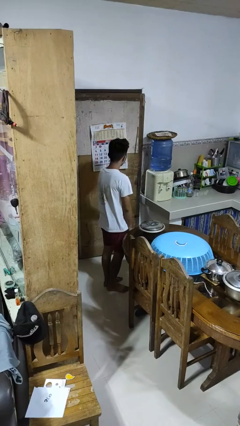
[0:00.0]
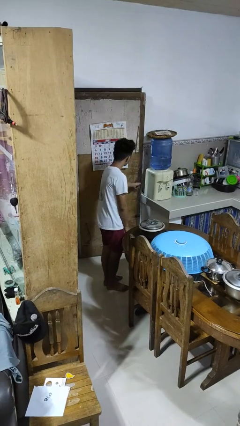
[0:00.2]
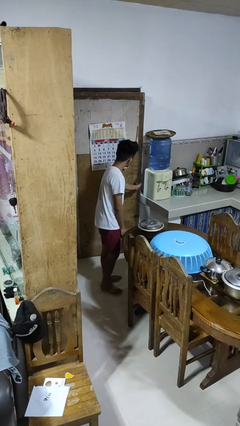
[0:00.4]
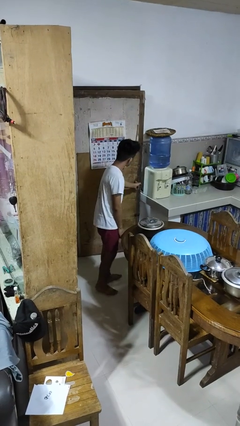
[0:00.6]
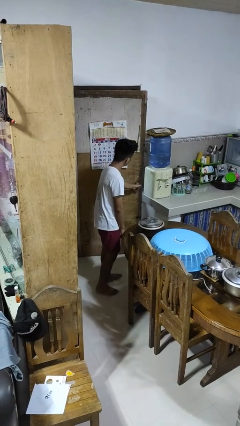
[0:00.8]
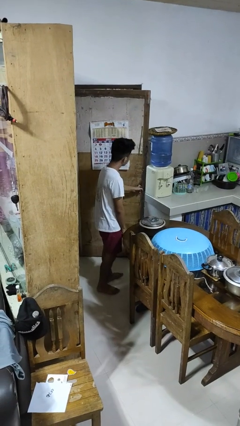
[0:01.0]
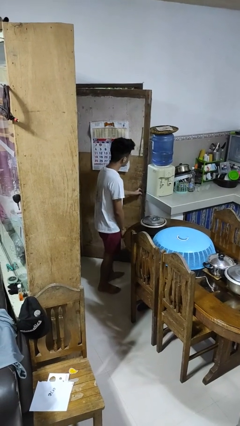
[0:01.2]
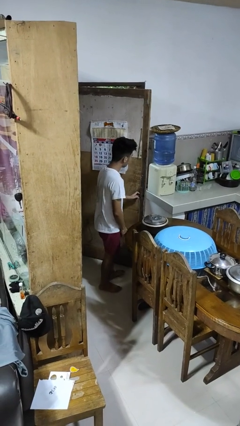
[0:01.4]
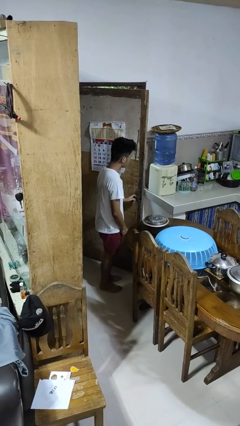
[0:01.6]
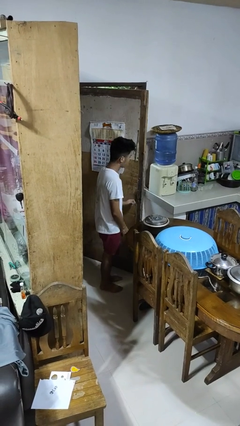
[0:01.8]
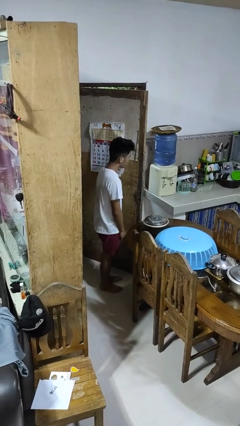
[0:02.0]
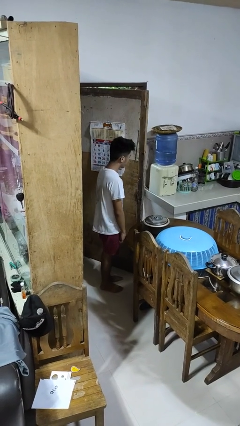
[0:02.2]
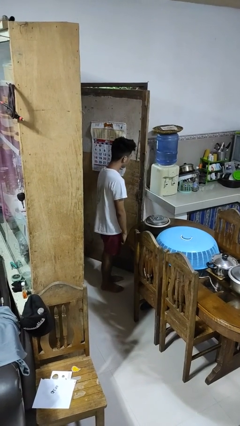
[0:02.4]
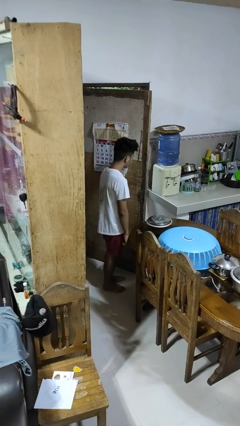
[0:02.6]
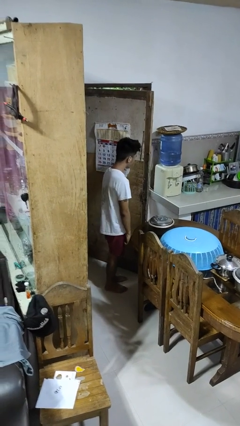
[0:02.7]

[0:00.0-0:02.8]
person opens facility door

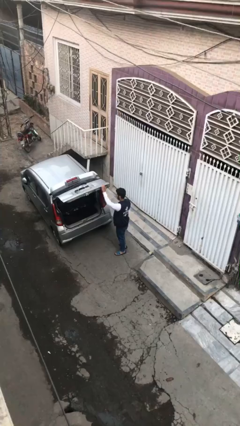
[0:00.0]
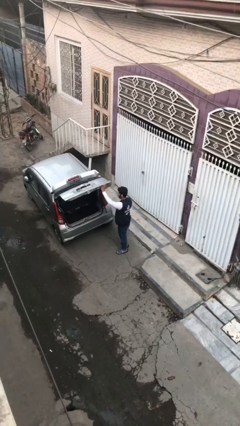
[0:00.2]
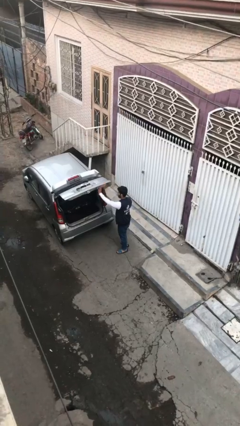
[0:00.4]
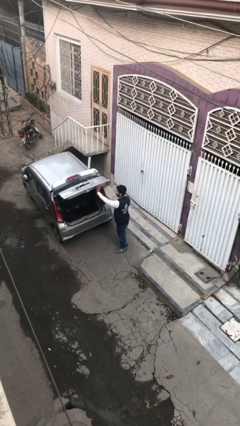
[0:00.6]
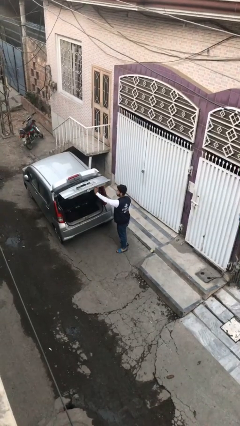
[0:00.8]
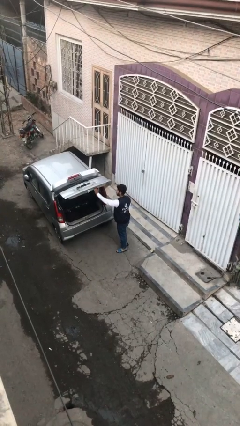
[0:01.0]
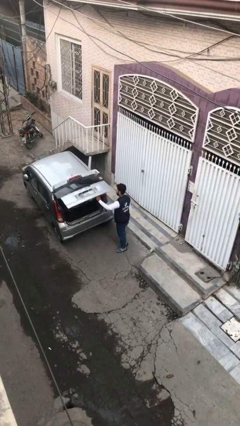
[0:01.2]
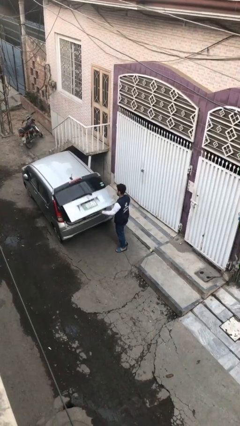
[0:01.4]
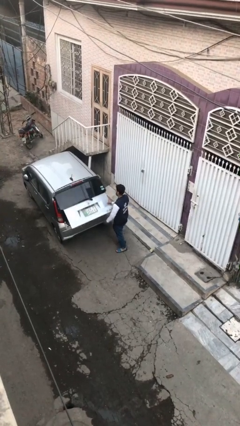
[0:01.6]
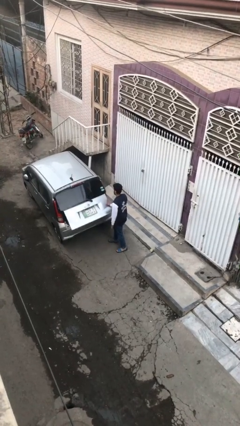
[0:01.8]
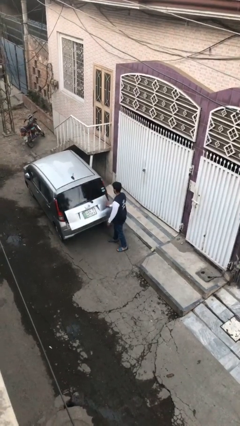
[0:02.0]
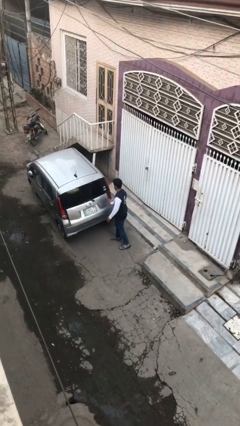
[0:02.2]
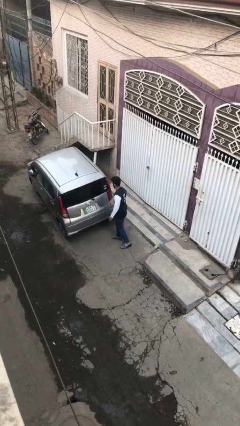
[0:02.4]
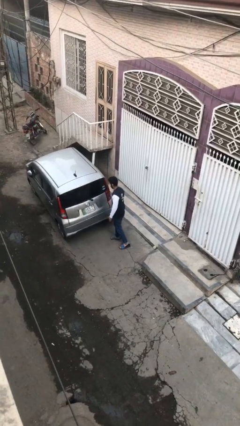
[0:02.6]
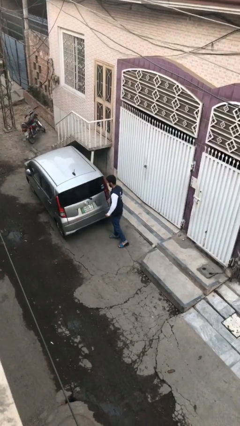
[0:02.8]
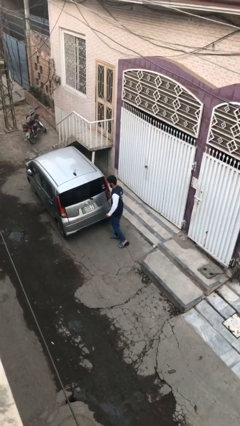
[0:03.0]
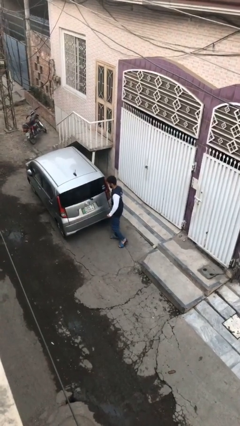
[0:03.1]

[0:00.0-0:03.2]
person closes car trunk

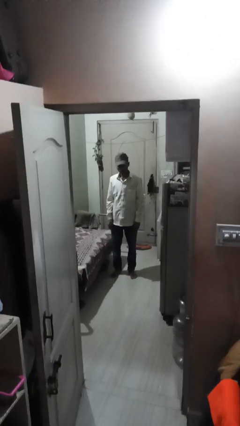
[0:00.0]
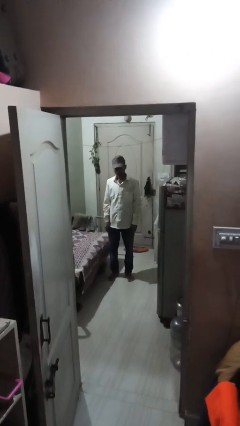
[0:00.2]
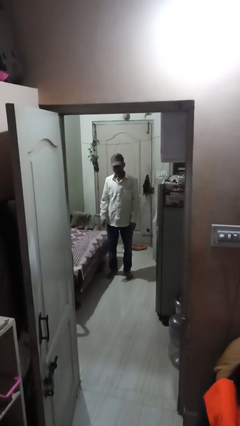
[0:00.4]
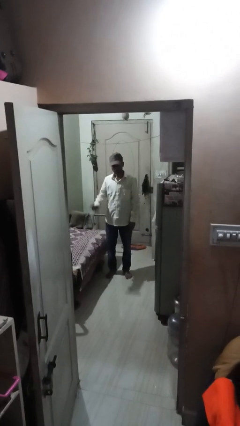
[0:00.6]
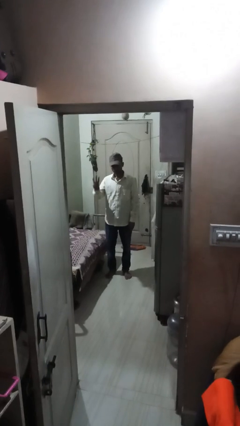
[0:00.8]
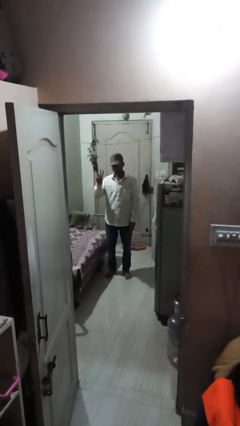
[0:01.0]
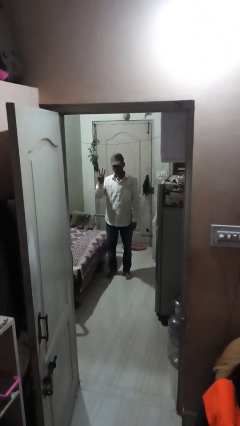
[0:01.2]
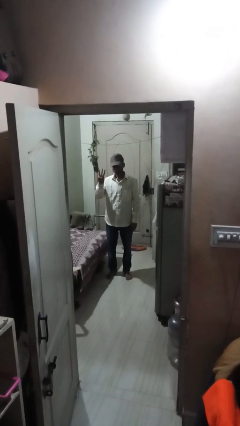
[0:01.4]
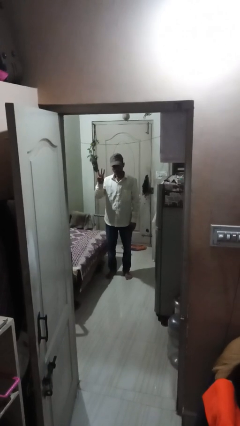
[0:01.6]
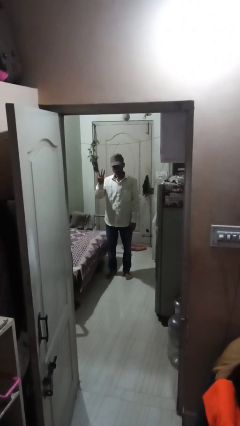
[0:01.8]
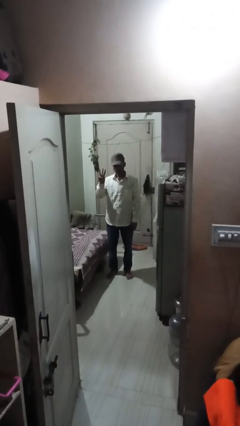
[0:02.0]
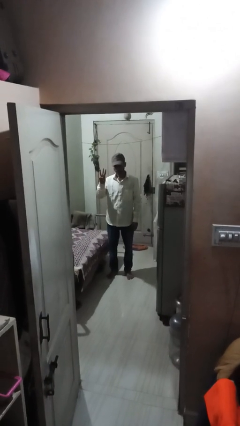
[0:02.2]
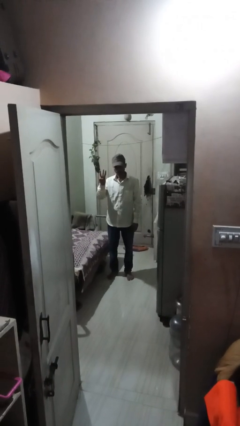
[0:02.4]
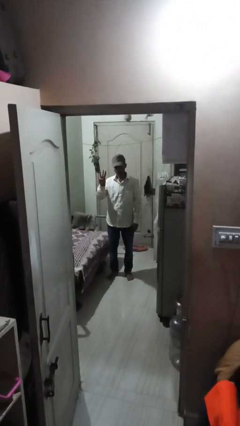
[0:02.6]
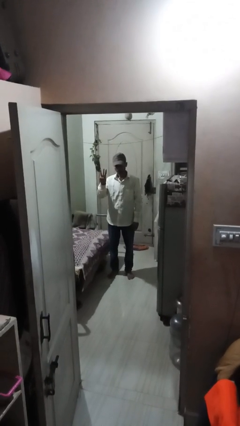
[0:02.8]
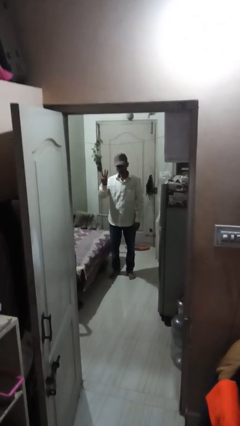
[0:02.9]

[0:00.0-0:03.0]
person gestures number three

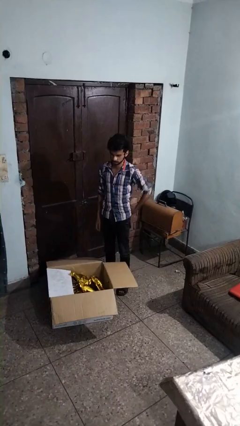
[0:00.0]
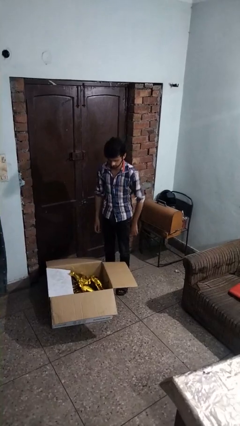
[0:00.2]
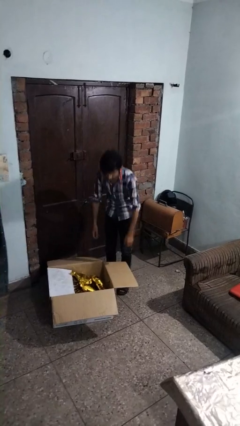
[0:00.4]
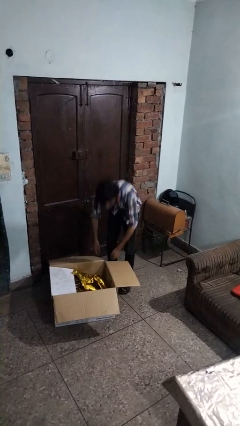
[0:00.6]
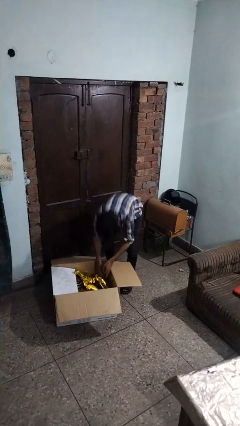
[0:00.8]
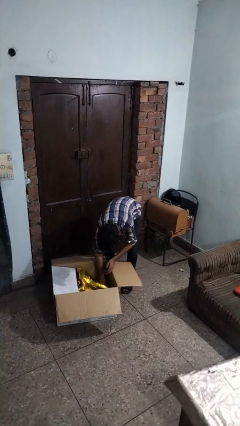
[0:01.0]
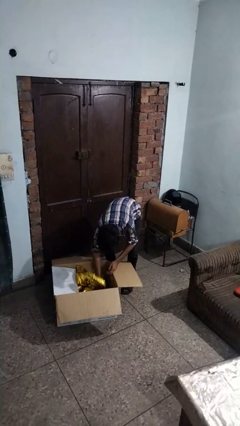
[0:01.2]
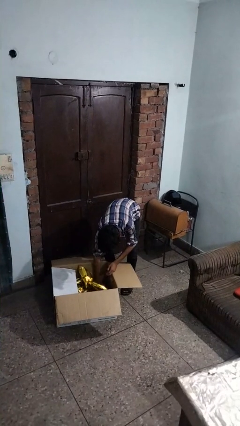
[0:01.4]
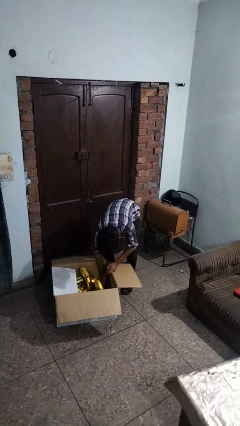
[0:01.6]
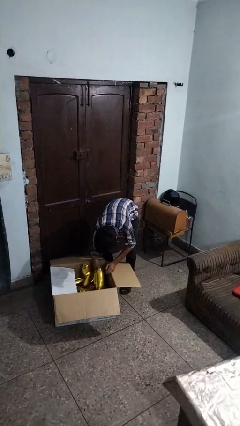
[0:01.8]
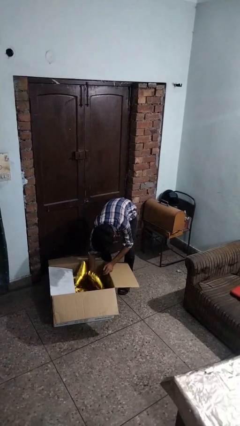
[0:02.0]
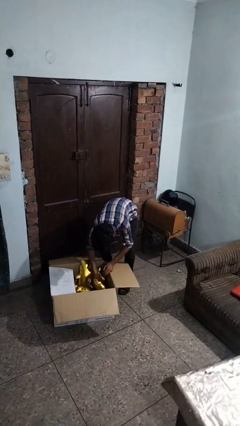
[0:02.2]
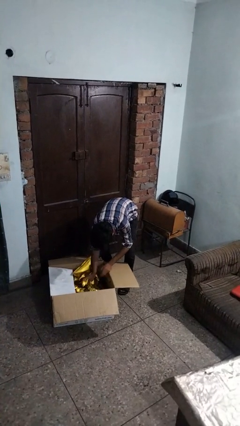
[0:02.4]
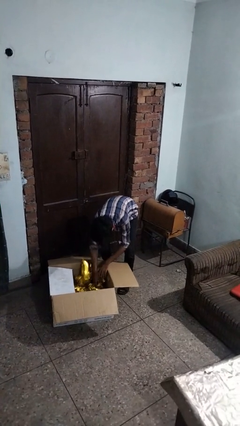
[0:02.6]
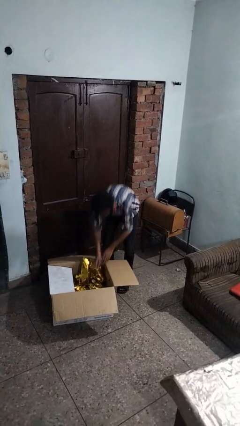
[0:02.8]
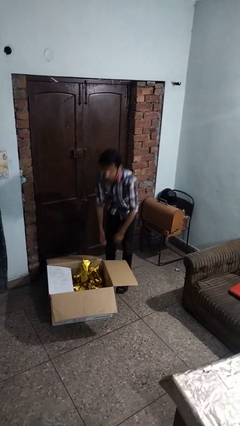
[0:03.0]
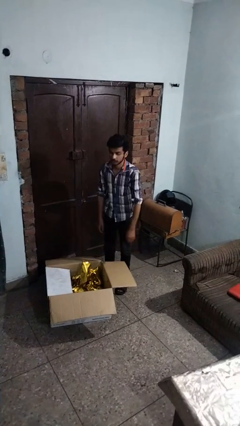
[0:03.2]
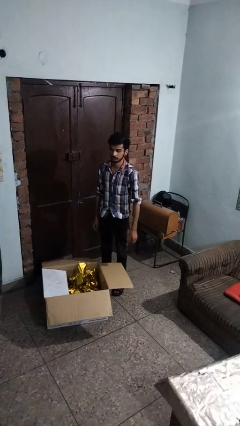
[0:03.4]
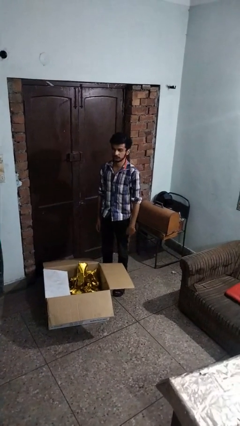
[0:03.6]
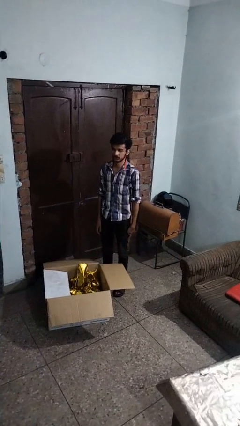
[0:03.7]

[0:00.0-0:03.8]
person searches in box

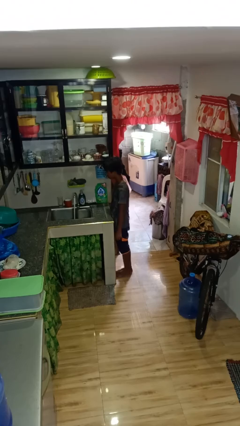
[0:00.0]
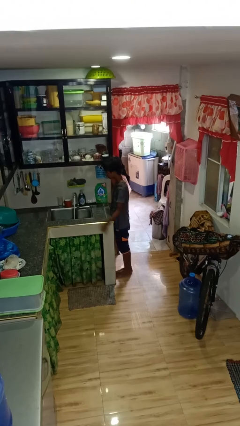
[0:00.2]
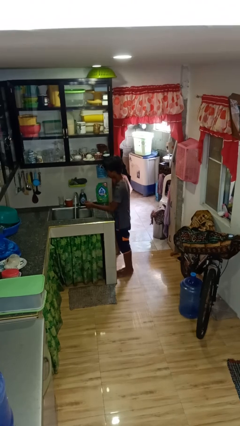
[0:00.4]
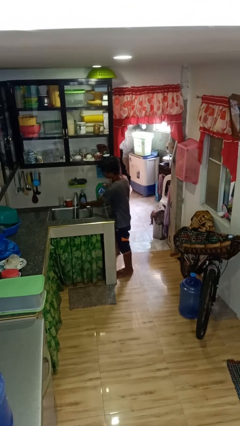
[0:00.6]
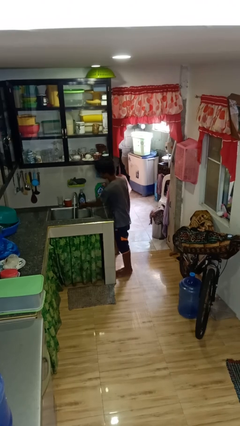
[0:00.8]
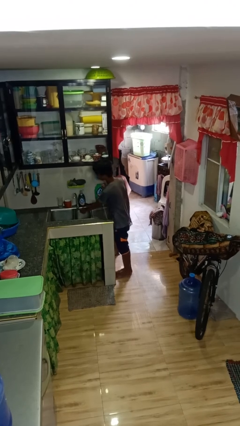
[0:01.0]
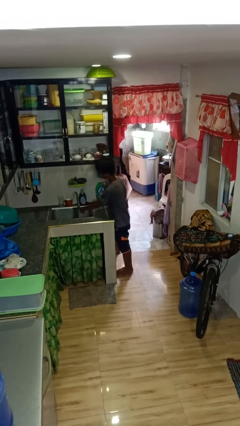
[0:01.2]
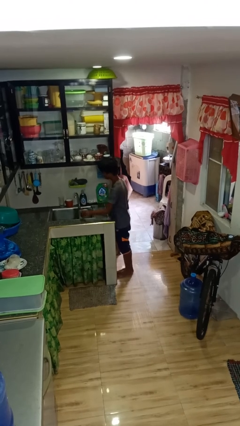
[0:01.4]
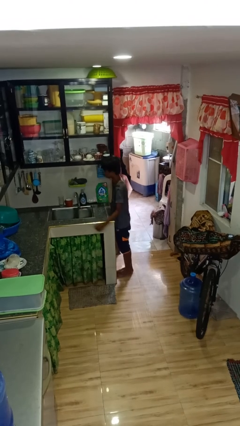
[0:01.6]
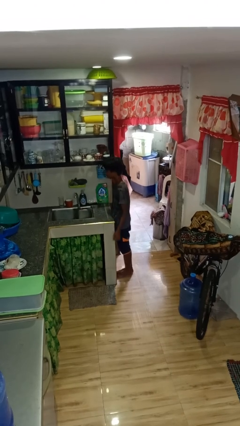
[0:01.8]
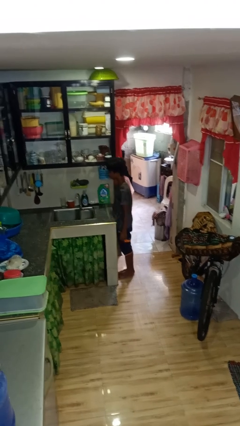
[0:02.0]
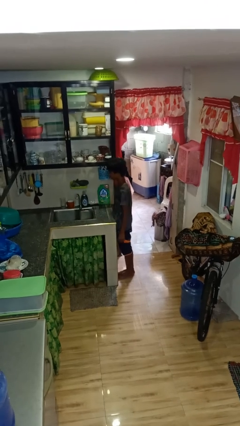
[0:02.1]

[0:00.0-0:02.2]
person turns off faucet

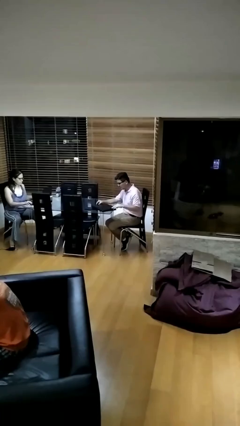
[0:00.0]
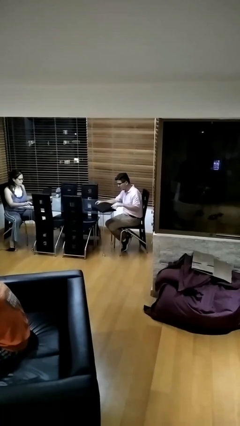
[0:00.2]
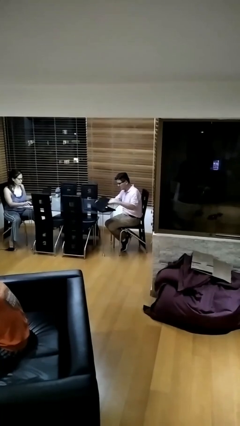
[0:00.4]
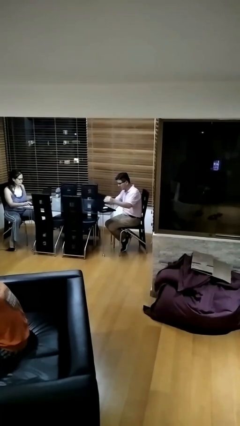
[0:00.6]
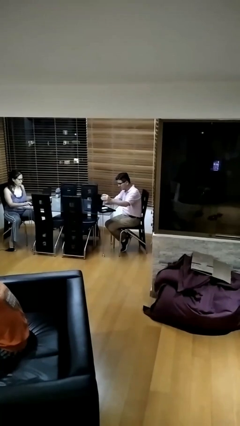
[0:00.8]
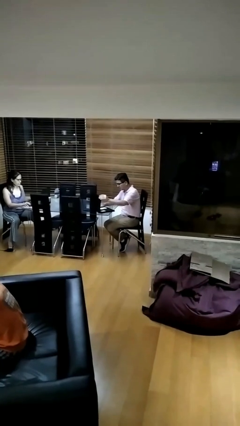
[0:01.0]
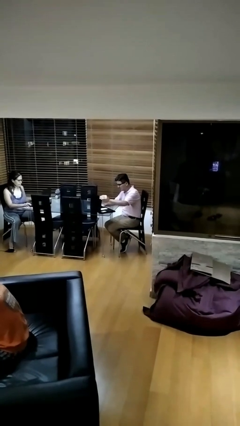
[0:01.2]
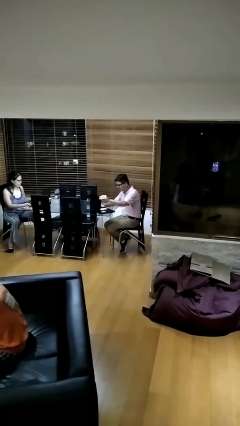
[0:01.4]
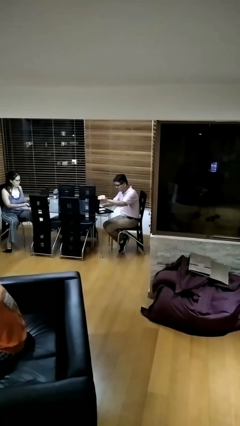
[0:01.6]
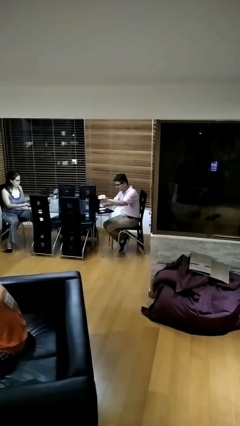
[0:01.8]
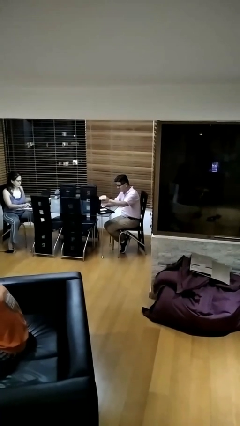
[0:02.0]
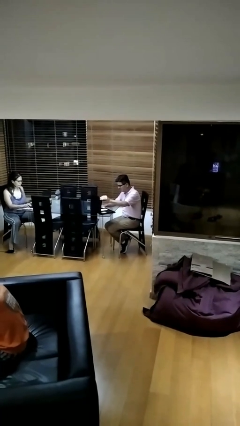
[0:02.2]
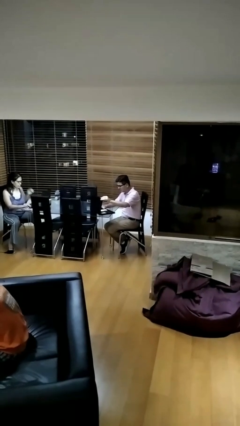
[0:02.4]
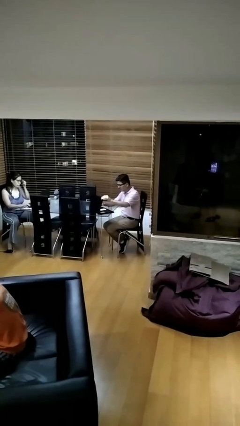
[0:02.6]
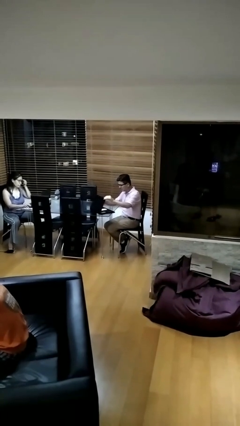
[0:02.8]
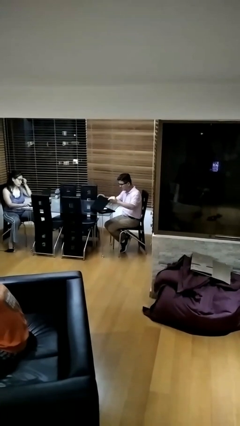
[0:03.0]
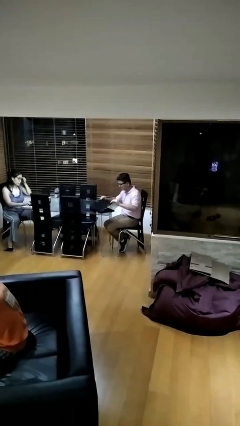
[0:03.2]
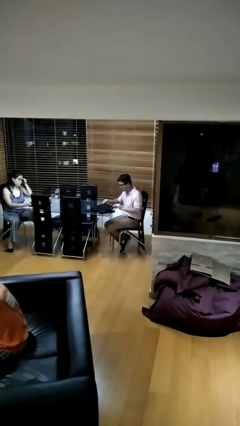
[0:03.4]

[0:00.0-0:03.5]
person interacts with laptop
